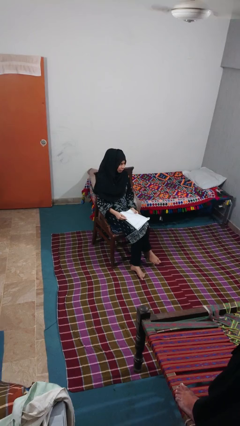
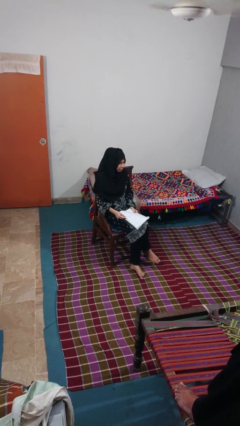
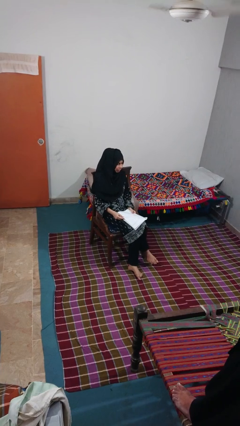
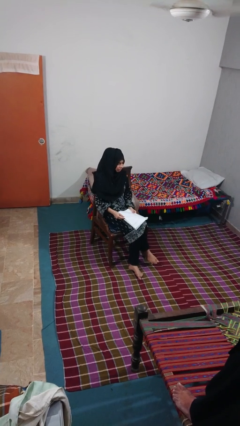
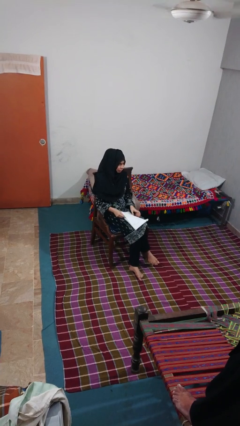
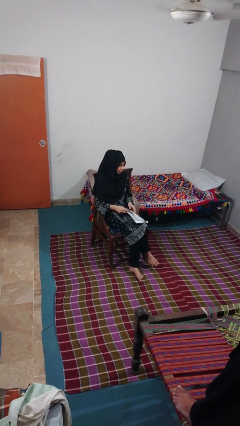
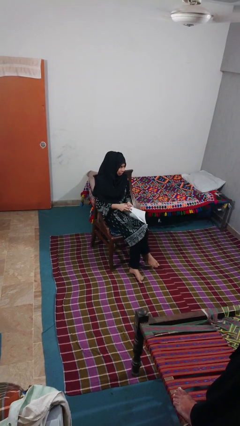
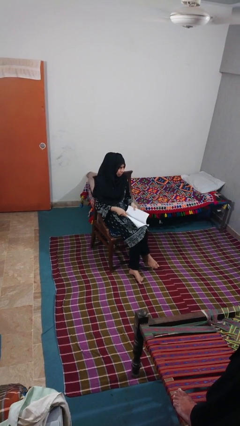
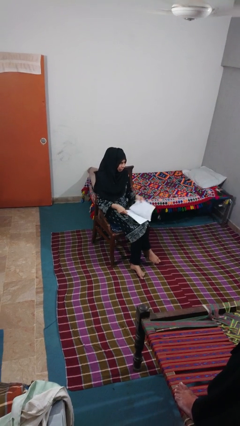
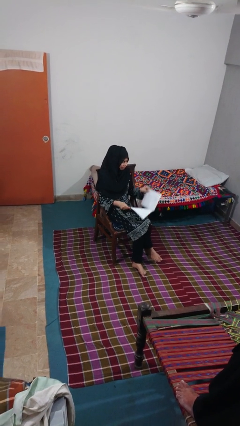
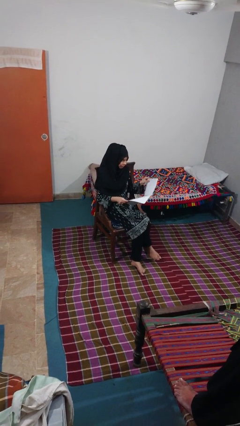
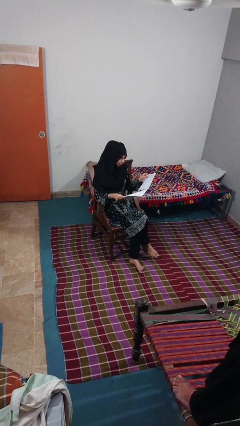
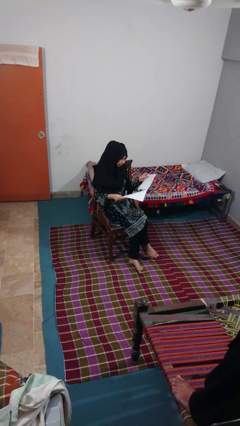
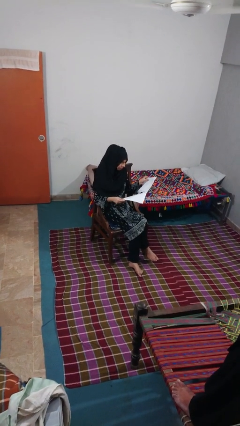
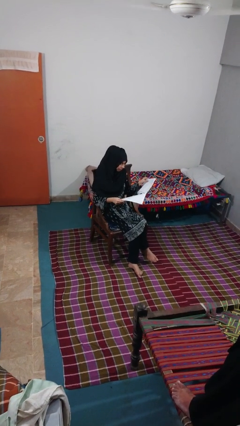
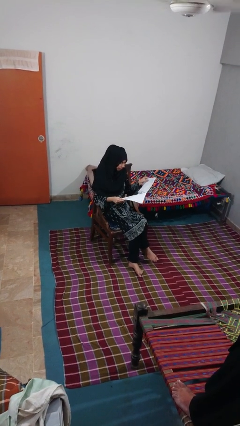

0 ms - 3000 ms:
person reads newspaper

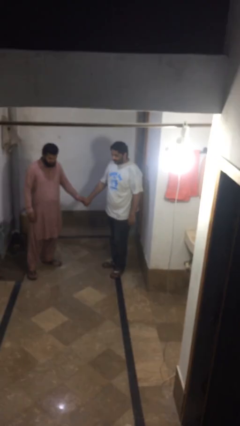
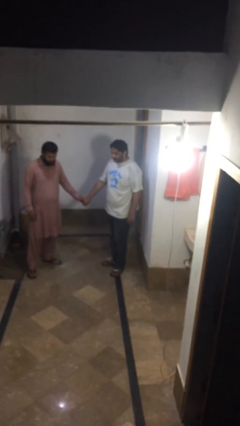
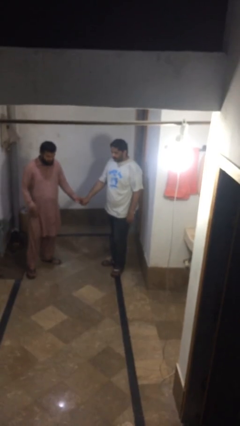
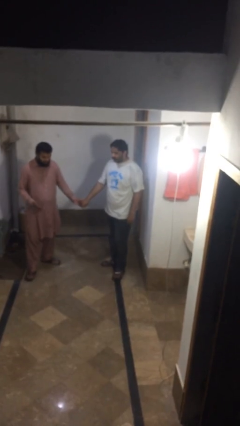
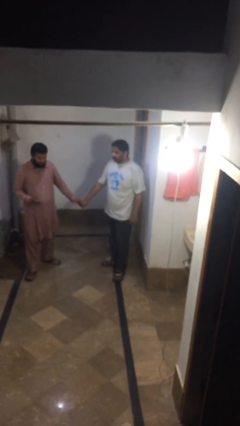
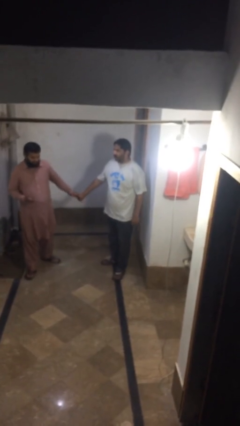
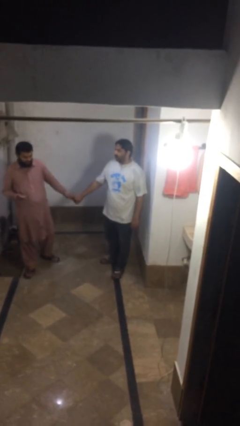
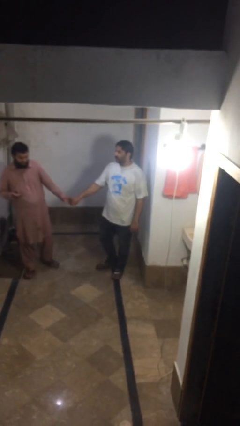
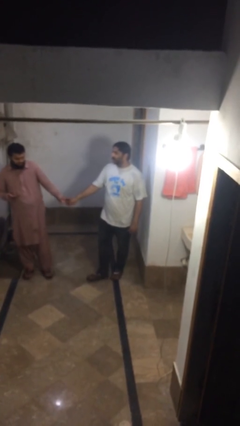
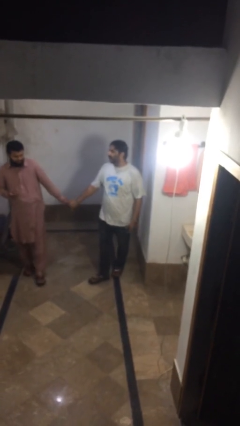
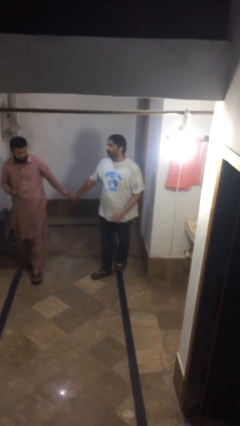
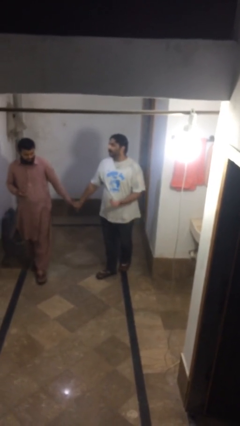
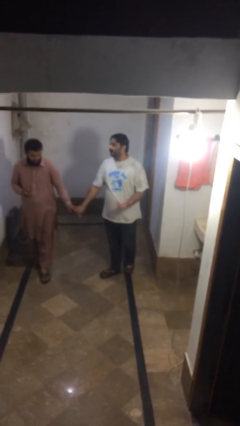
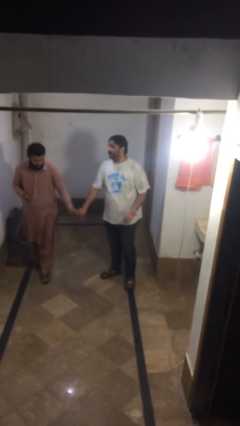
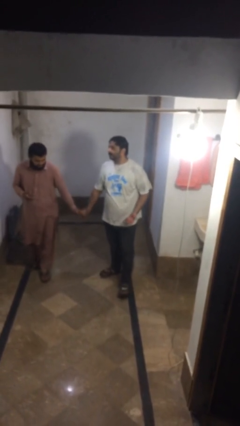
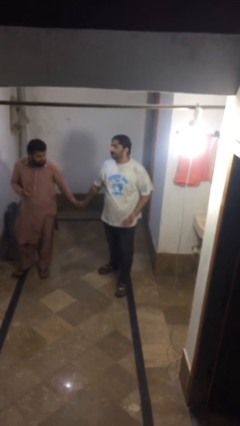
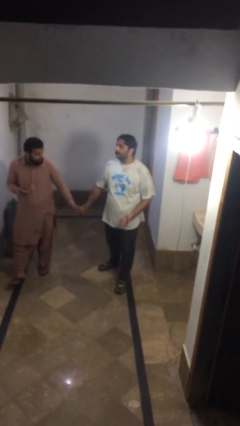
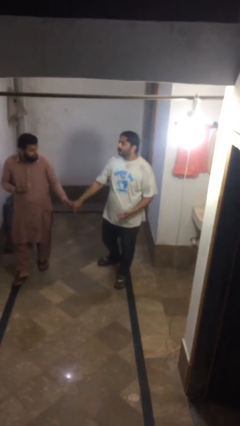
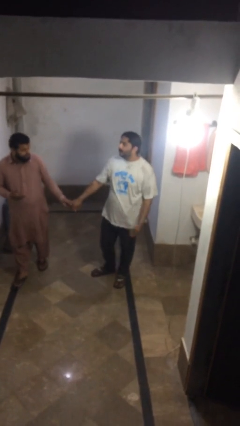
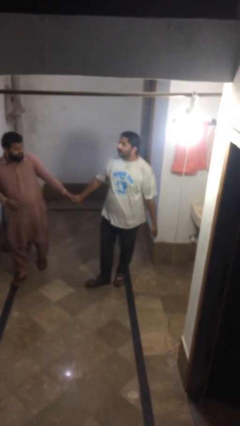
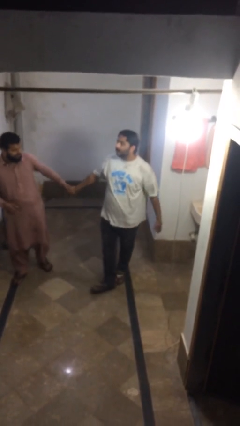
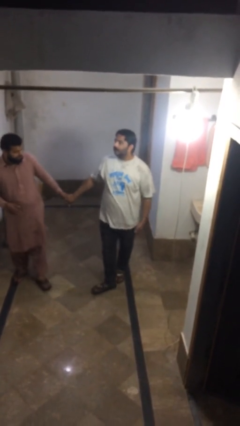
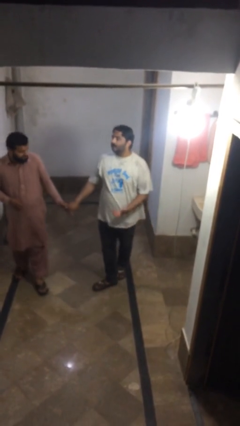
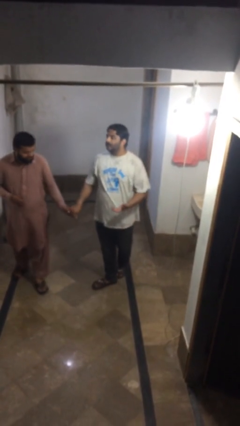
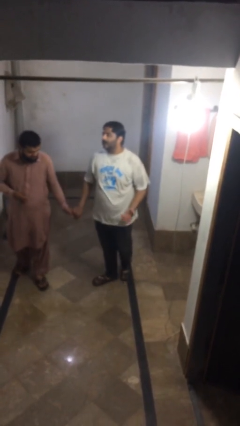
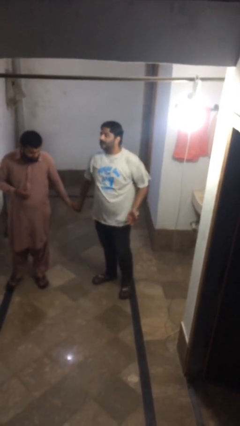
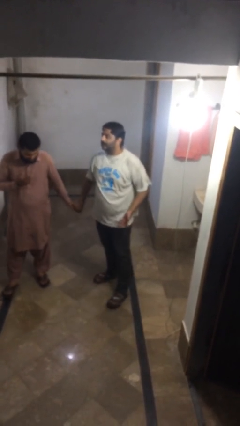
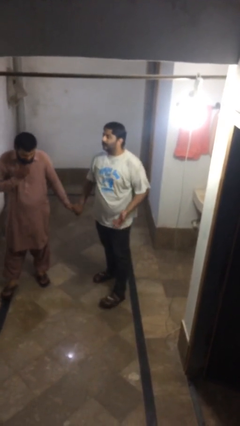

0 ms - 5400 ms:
person holds hand

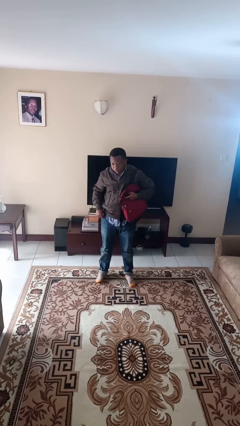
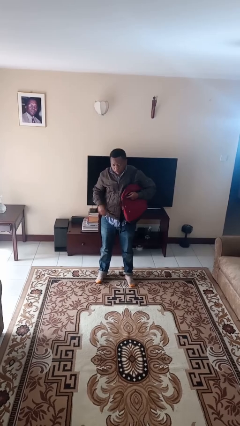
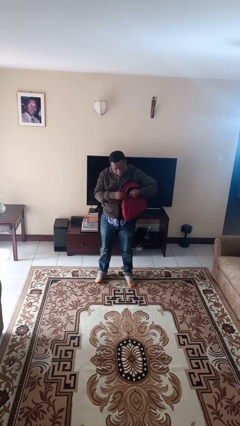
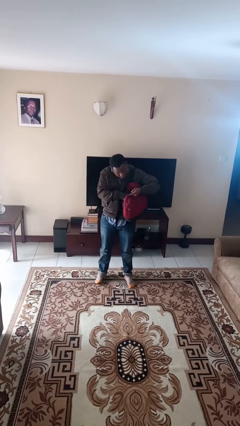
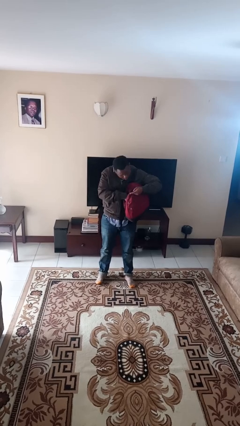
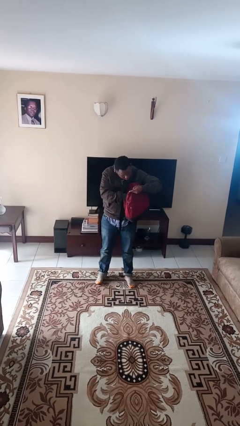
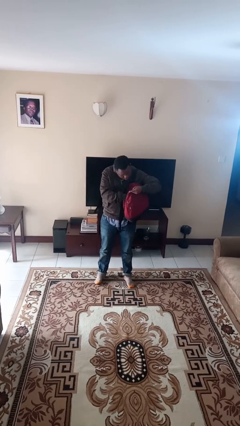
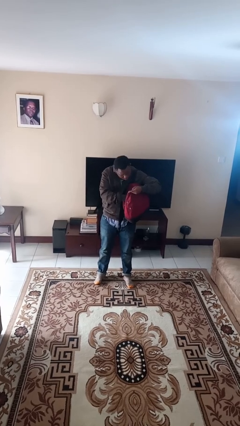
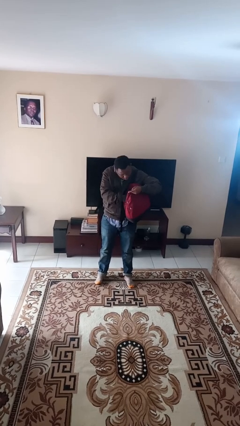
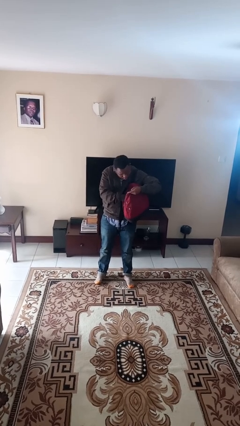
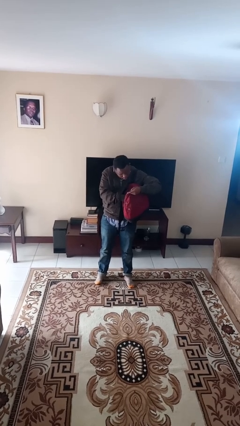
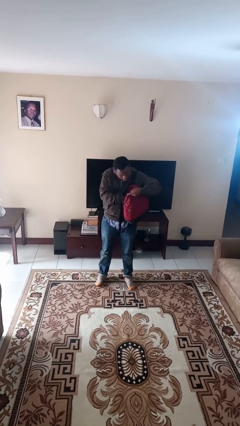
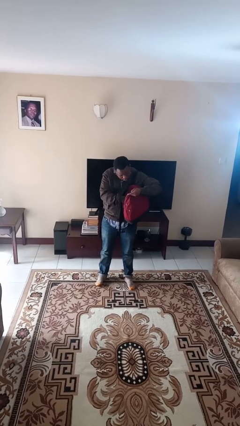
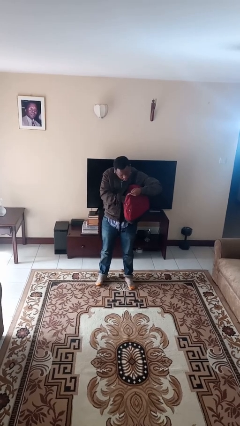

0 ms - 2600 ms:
person searches in backpack

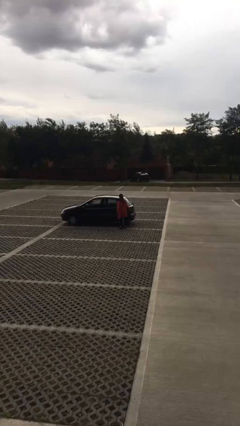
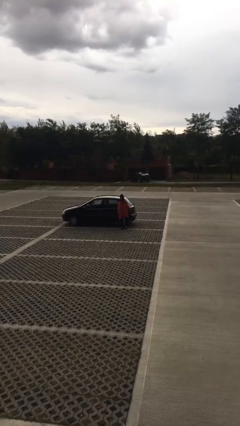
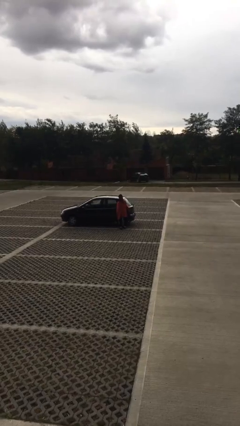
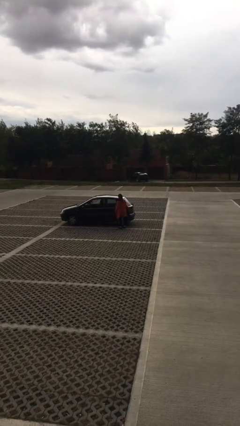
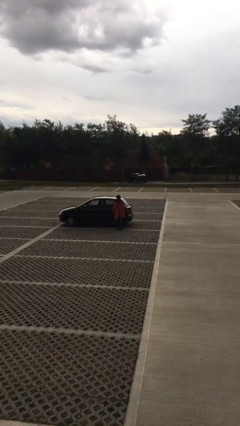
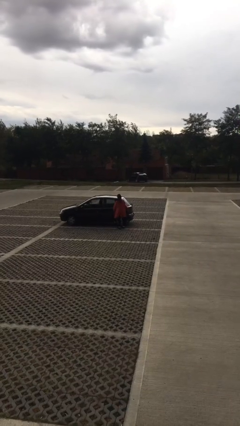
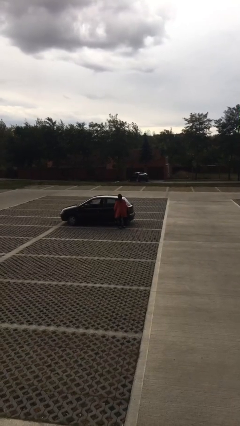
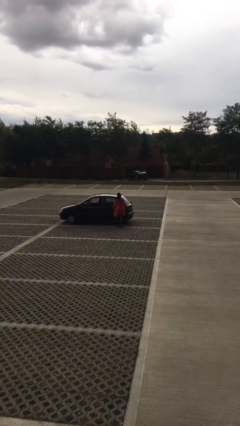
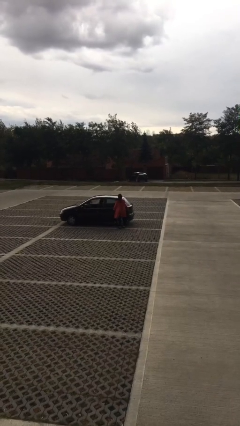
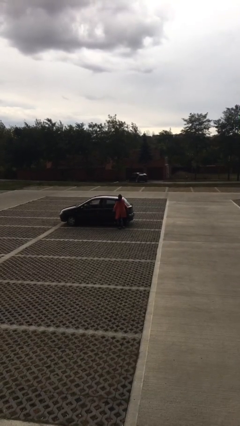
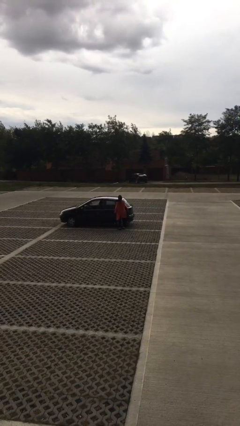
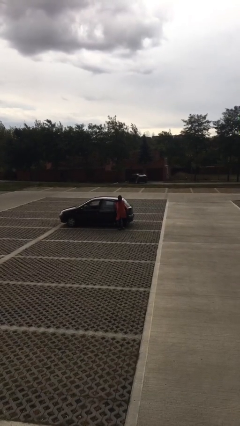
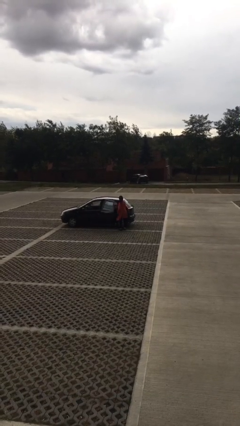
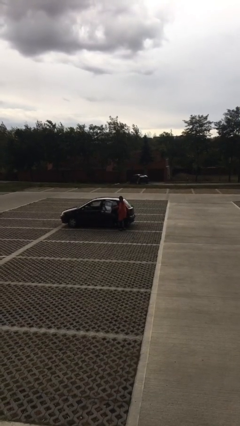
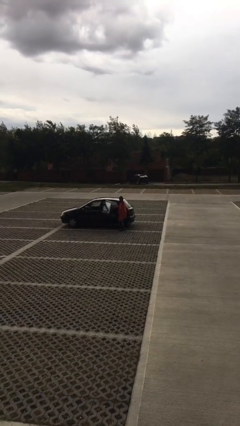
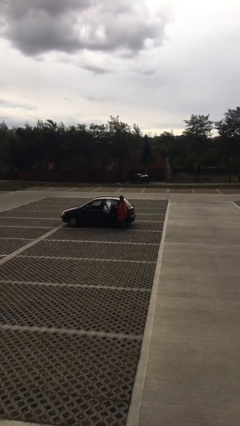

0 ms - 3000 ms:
person opens car door

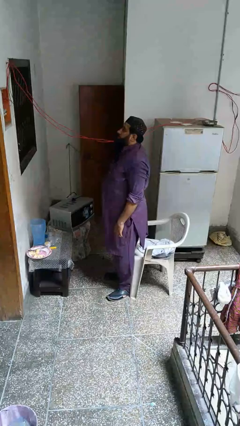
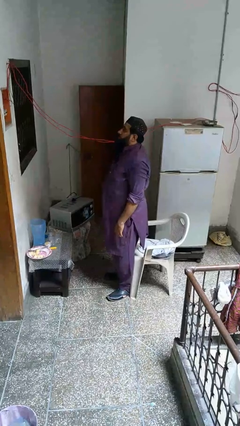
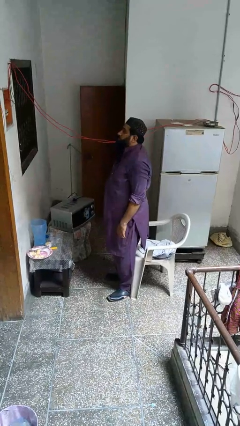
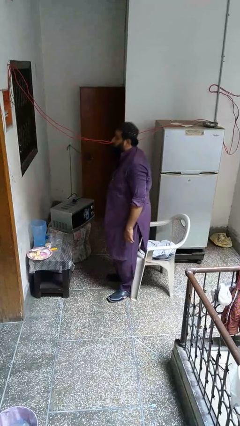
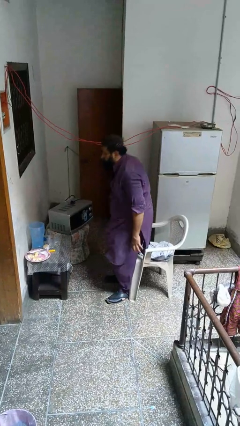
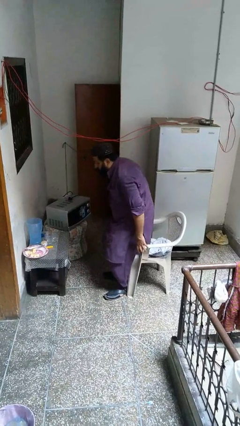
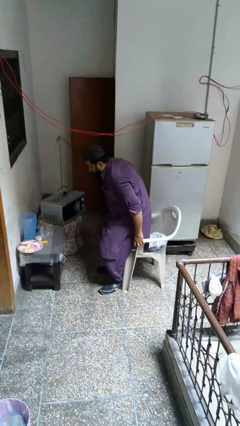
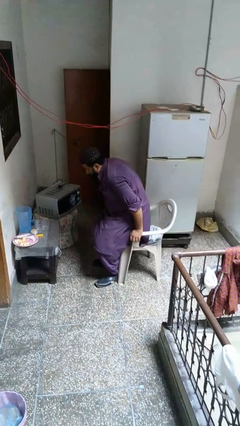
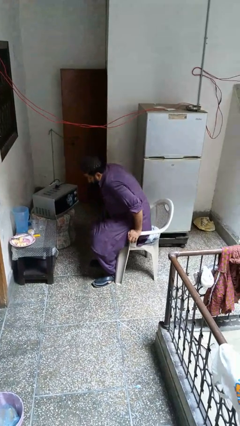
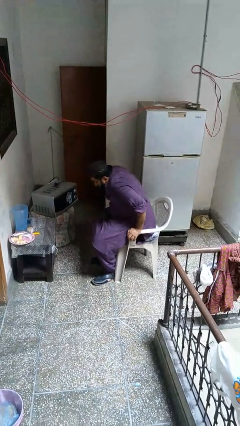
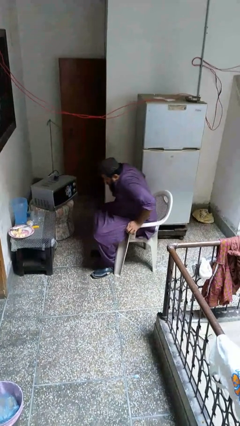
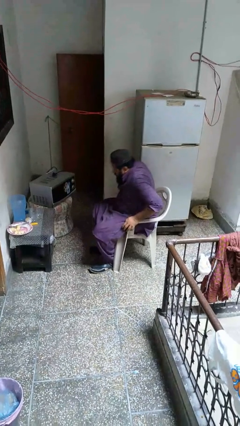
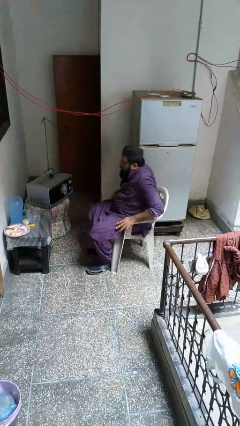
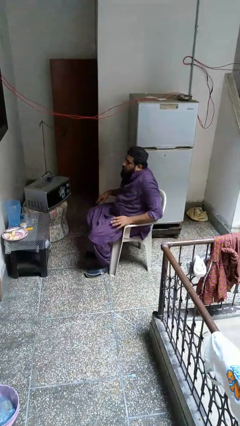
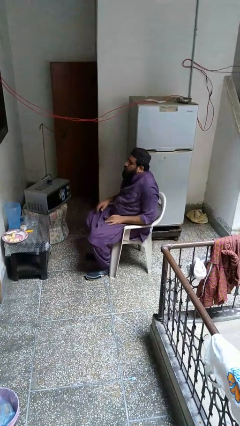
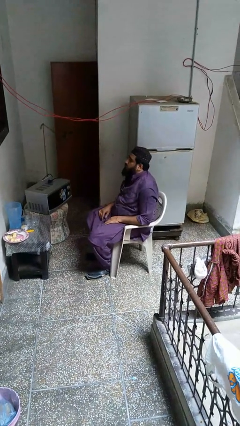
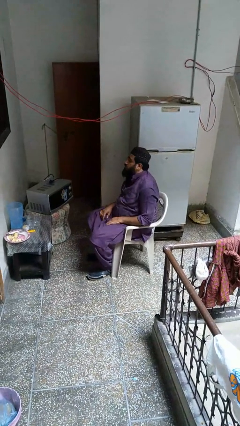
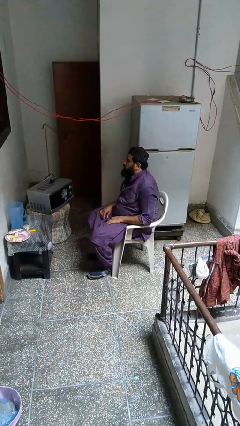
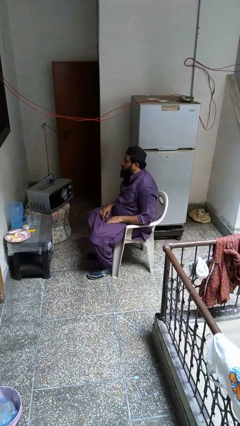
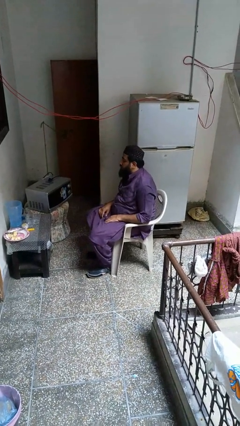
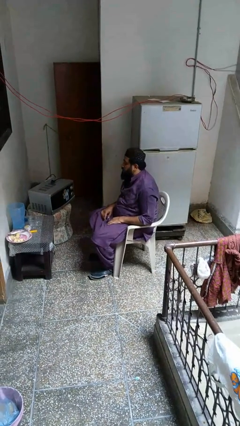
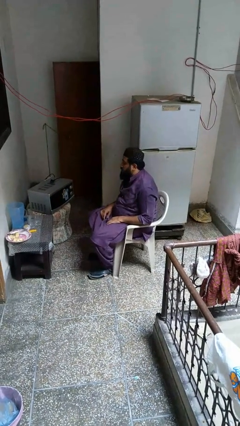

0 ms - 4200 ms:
person sits down
